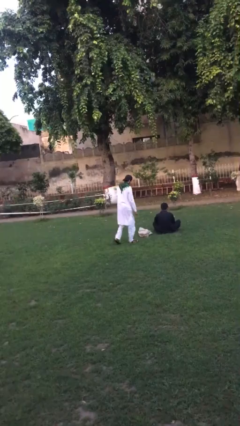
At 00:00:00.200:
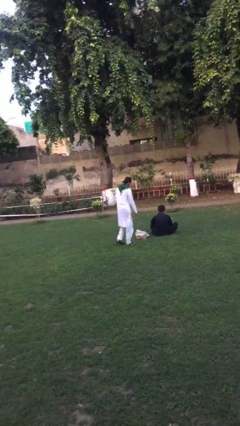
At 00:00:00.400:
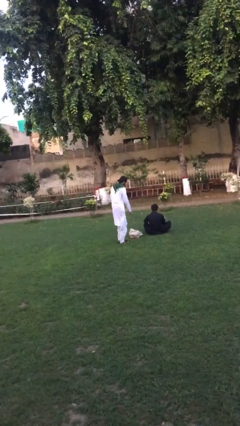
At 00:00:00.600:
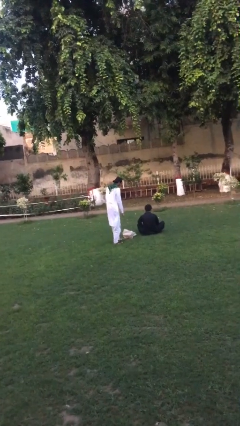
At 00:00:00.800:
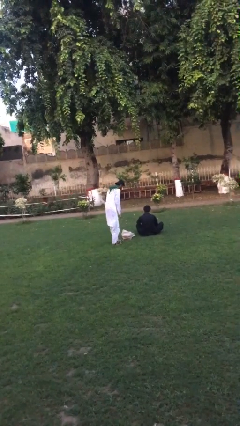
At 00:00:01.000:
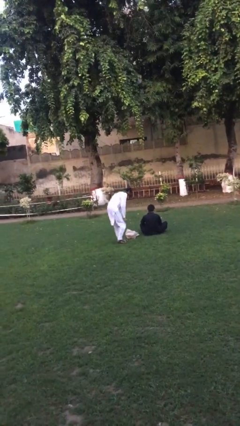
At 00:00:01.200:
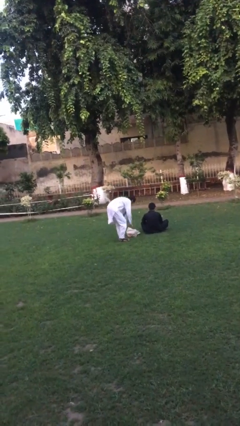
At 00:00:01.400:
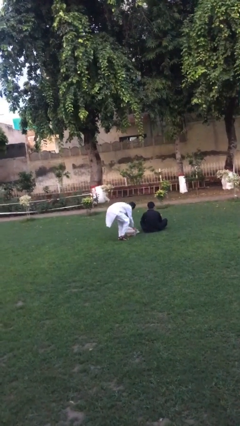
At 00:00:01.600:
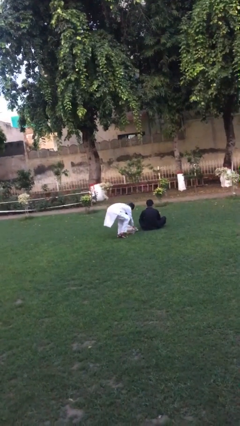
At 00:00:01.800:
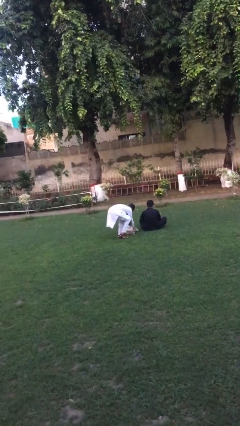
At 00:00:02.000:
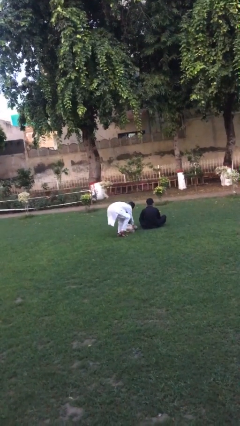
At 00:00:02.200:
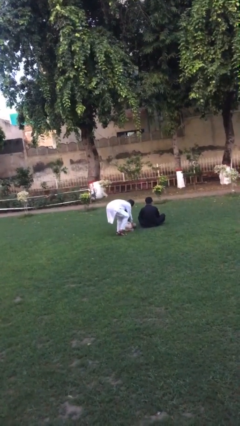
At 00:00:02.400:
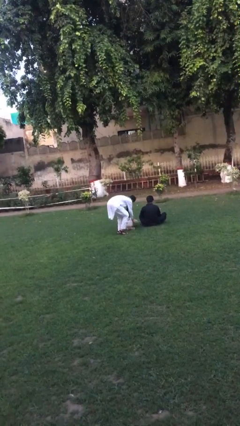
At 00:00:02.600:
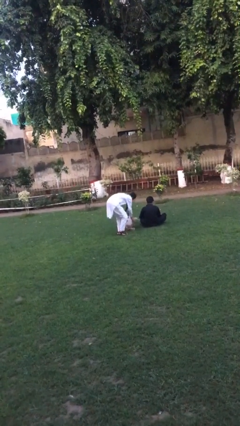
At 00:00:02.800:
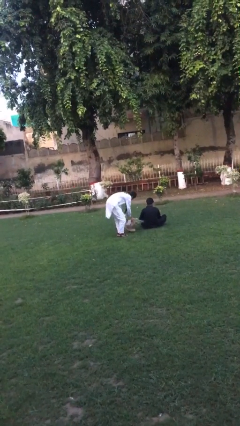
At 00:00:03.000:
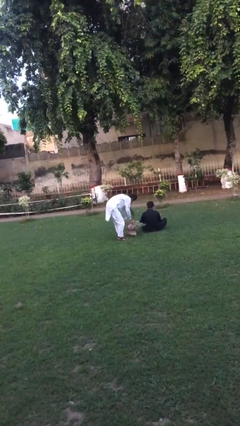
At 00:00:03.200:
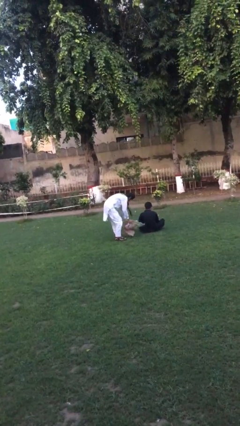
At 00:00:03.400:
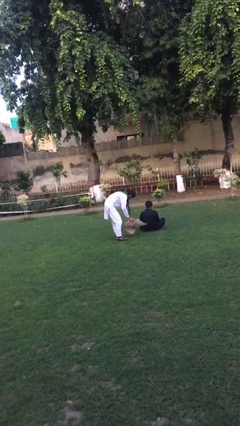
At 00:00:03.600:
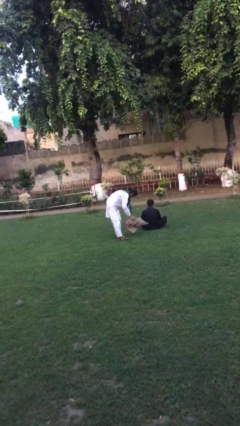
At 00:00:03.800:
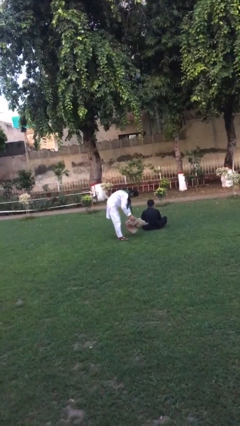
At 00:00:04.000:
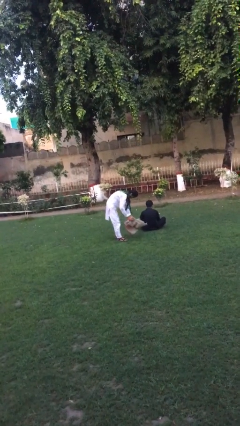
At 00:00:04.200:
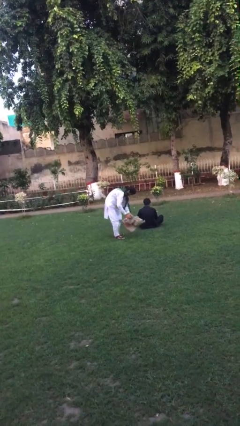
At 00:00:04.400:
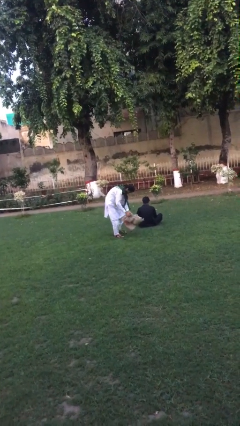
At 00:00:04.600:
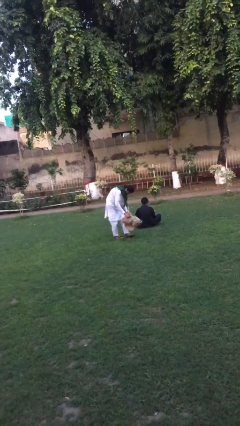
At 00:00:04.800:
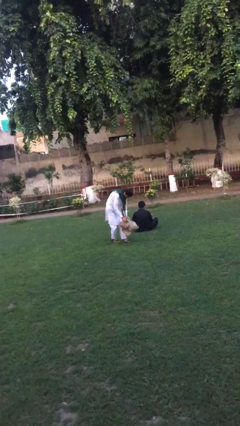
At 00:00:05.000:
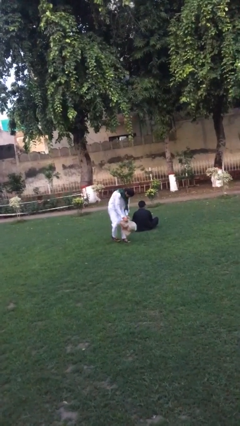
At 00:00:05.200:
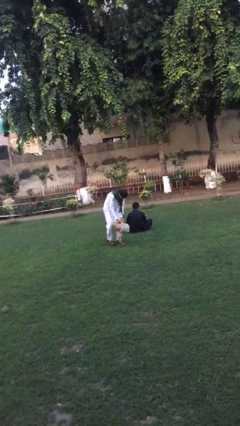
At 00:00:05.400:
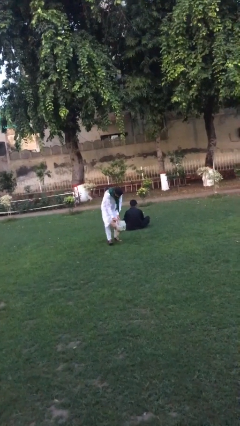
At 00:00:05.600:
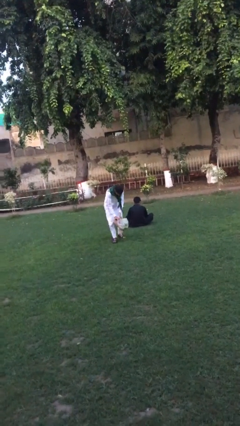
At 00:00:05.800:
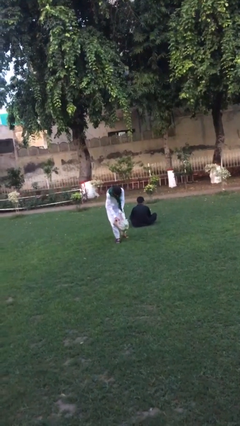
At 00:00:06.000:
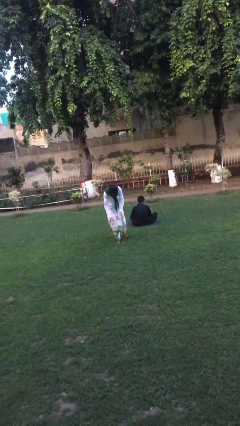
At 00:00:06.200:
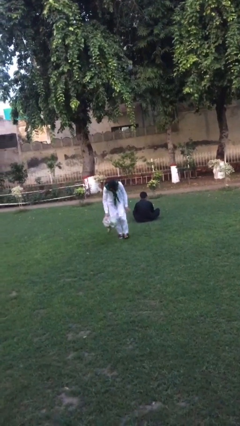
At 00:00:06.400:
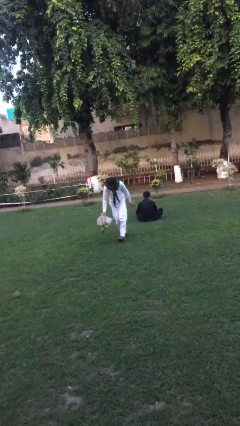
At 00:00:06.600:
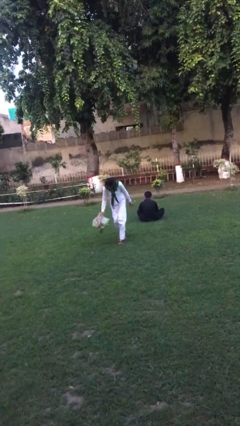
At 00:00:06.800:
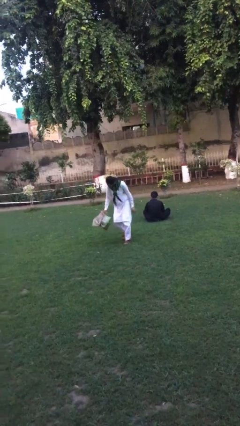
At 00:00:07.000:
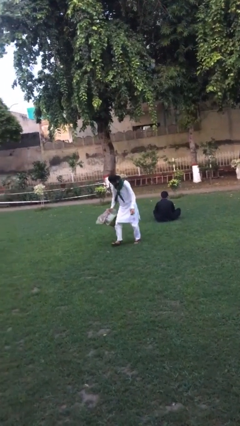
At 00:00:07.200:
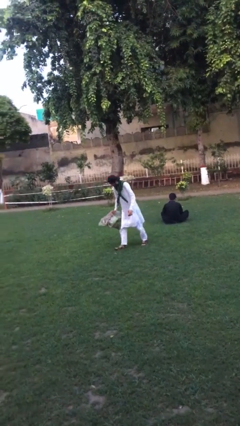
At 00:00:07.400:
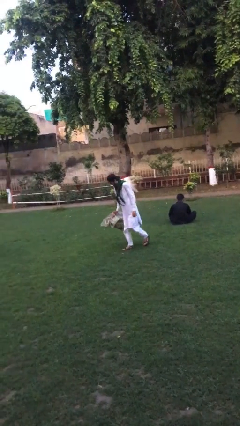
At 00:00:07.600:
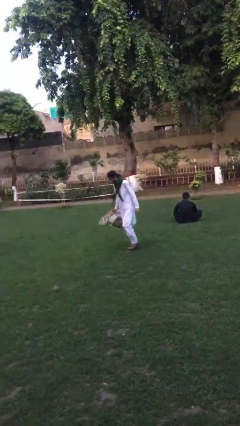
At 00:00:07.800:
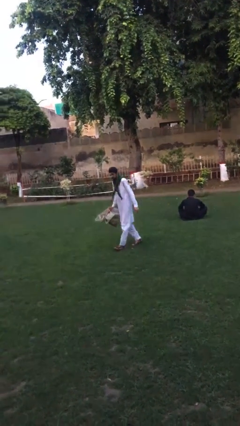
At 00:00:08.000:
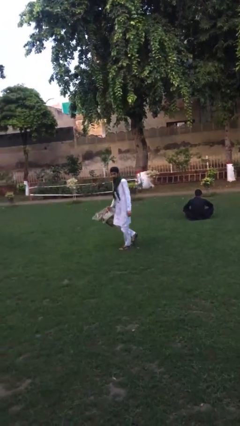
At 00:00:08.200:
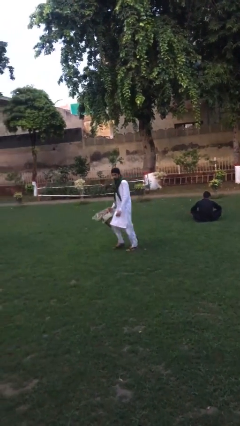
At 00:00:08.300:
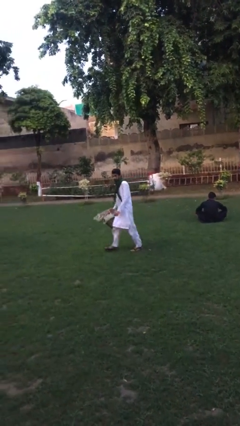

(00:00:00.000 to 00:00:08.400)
person steals object from person

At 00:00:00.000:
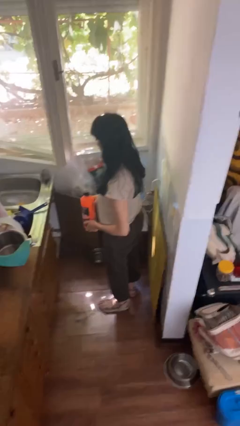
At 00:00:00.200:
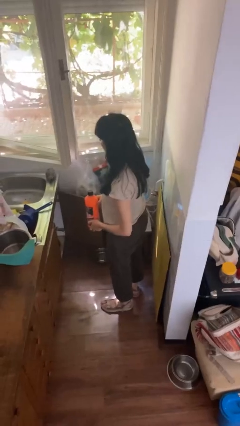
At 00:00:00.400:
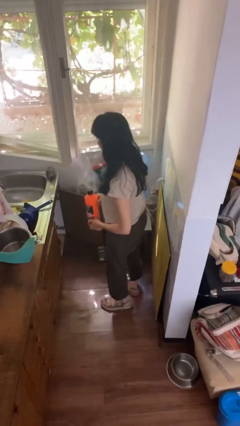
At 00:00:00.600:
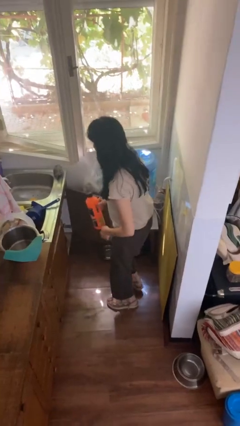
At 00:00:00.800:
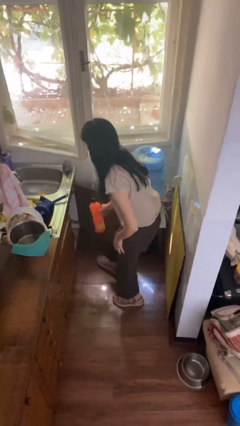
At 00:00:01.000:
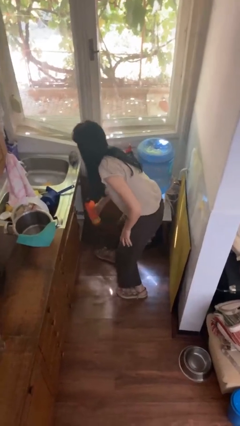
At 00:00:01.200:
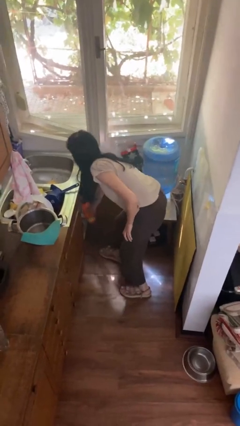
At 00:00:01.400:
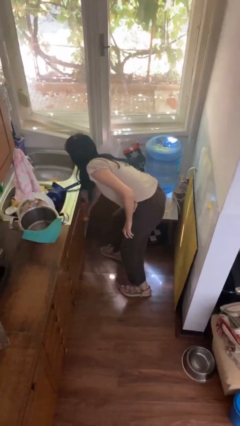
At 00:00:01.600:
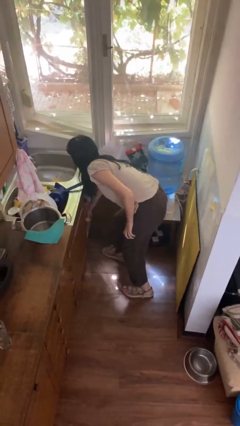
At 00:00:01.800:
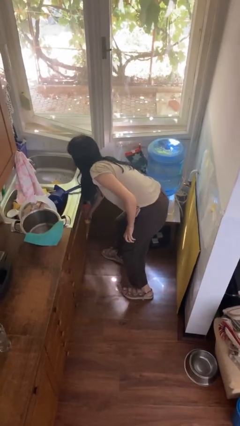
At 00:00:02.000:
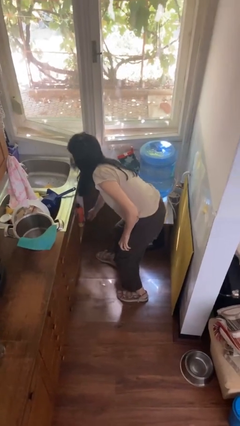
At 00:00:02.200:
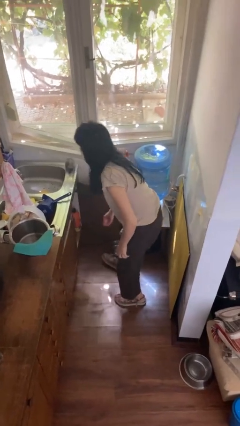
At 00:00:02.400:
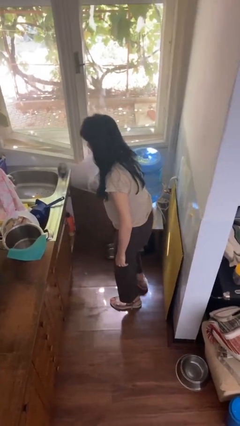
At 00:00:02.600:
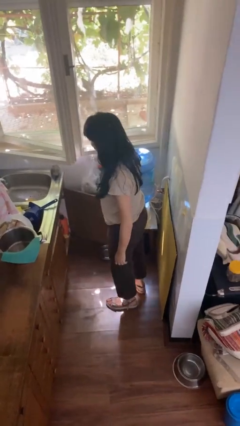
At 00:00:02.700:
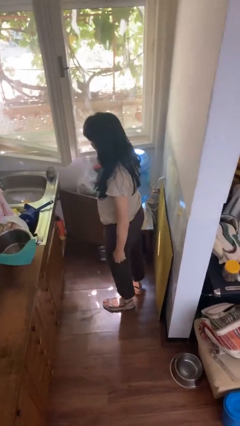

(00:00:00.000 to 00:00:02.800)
person puts down object into cabinet

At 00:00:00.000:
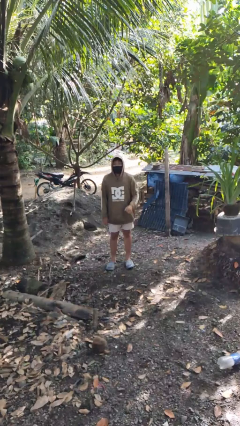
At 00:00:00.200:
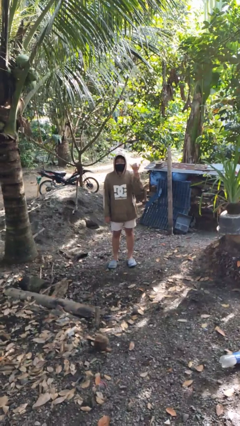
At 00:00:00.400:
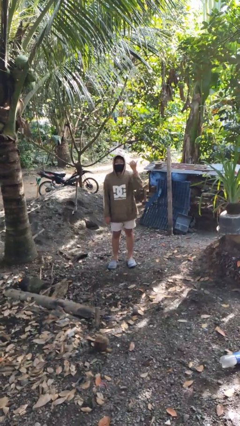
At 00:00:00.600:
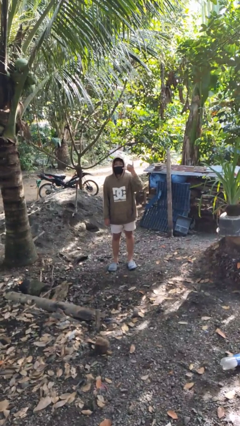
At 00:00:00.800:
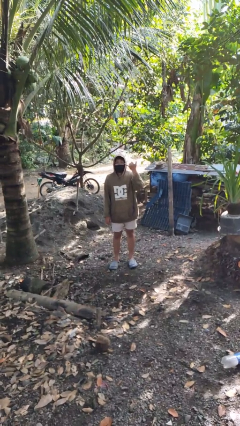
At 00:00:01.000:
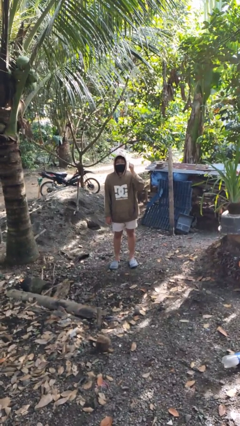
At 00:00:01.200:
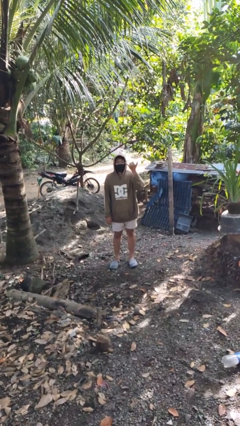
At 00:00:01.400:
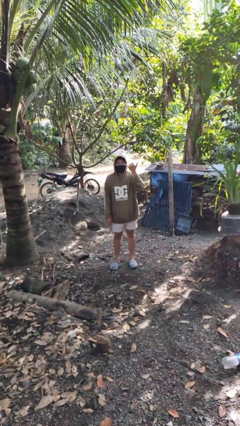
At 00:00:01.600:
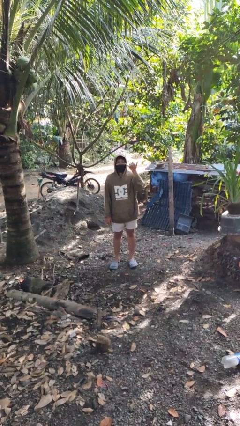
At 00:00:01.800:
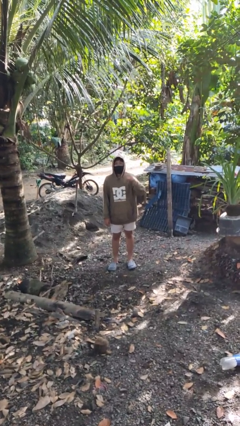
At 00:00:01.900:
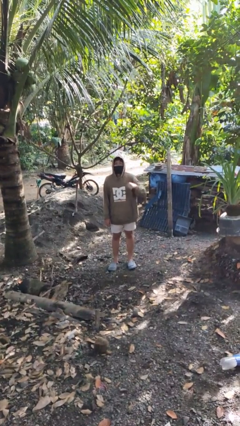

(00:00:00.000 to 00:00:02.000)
person gestures hang loose

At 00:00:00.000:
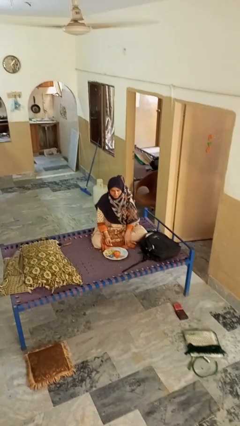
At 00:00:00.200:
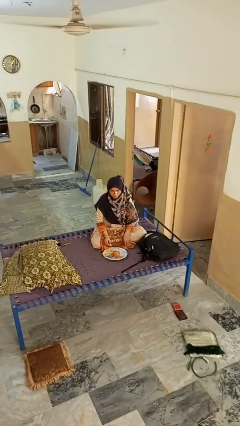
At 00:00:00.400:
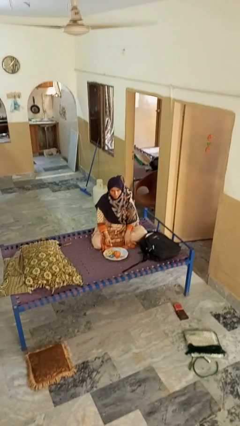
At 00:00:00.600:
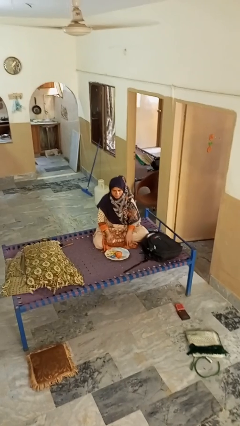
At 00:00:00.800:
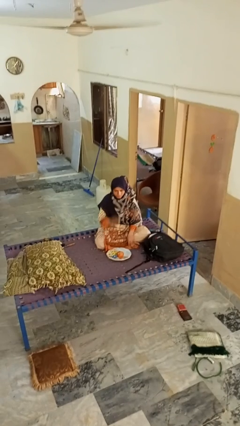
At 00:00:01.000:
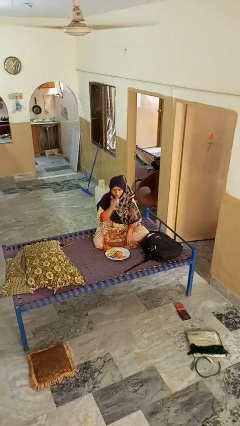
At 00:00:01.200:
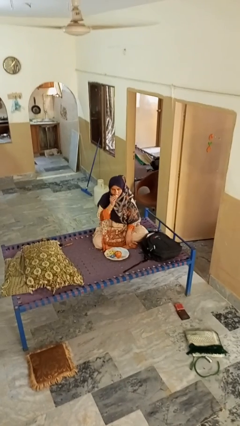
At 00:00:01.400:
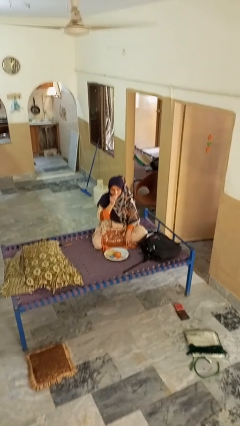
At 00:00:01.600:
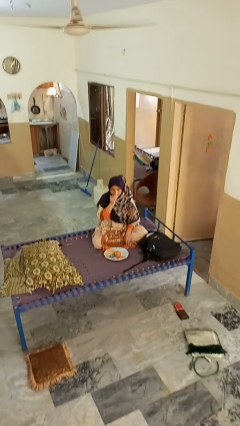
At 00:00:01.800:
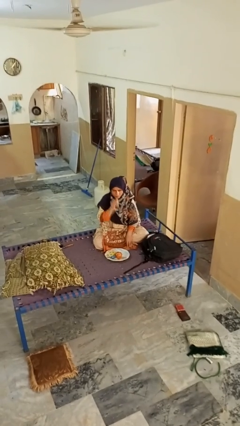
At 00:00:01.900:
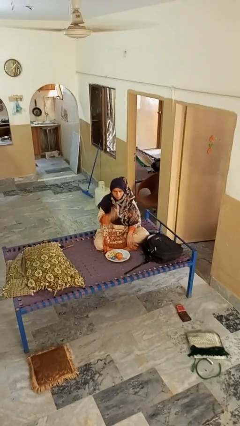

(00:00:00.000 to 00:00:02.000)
person eats apple

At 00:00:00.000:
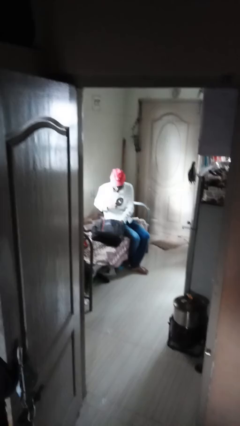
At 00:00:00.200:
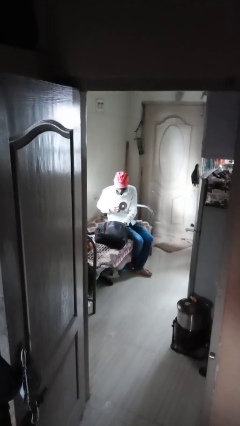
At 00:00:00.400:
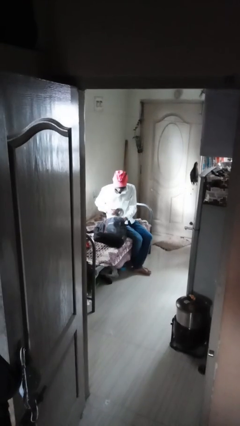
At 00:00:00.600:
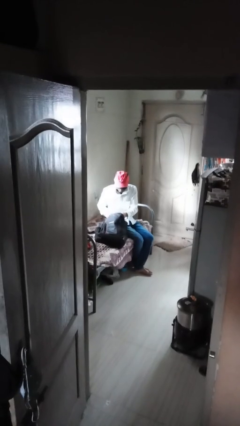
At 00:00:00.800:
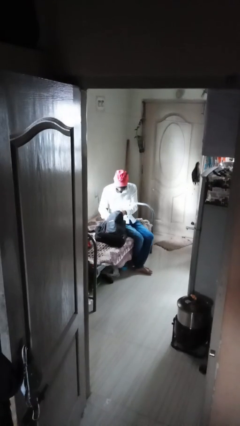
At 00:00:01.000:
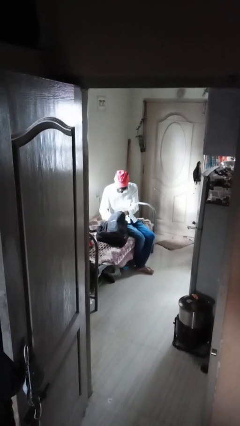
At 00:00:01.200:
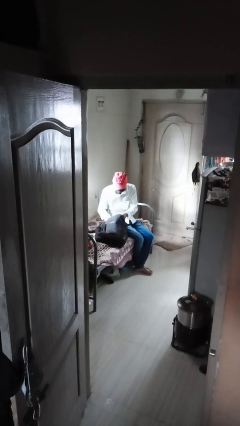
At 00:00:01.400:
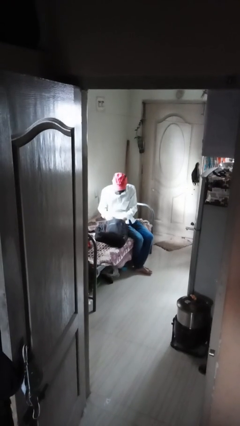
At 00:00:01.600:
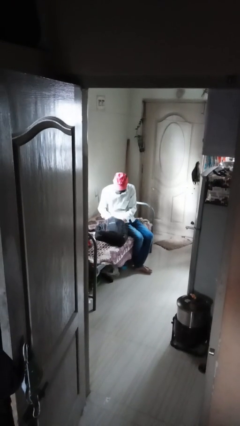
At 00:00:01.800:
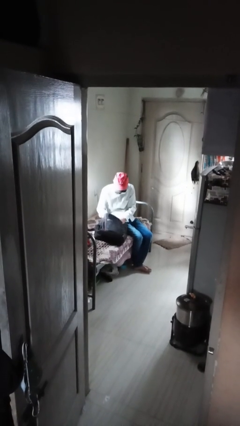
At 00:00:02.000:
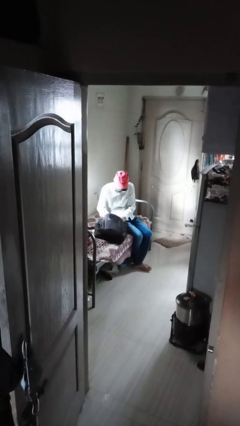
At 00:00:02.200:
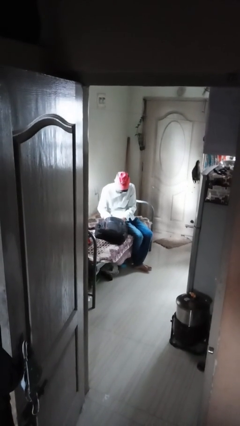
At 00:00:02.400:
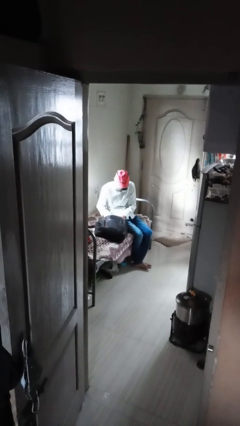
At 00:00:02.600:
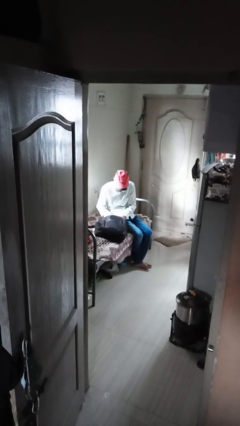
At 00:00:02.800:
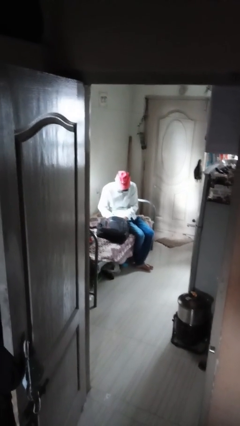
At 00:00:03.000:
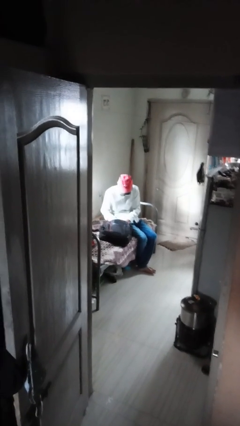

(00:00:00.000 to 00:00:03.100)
person puts object into backpack
